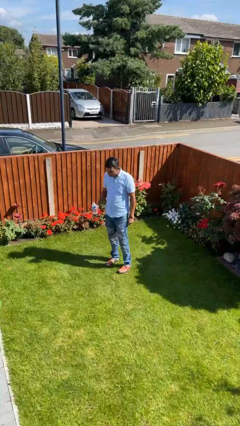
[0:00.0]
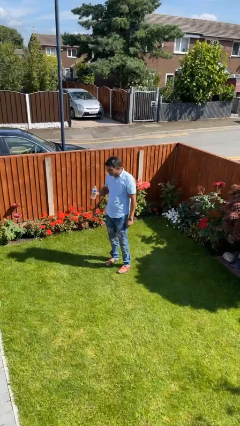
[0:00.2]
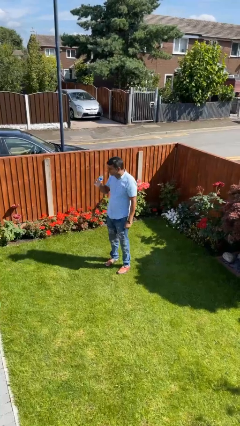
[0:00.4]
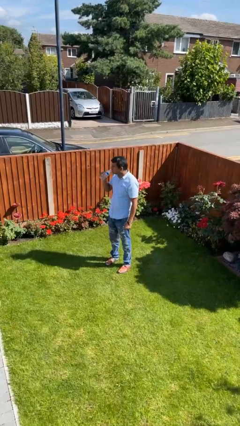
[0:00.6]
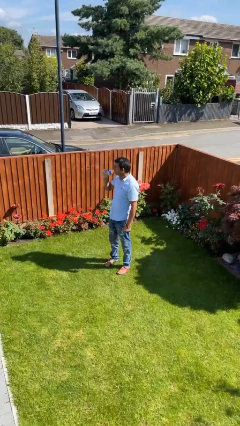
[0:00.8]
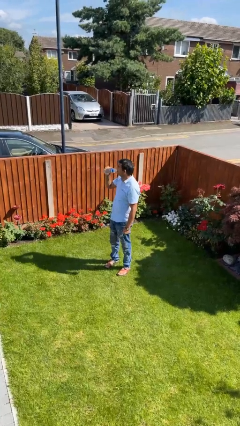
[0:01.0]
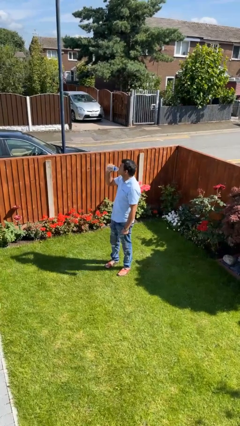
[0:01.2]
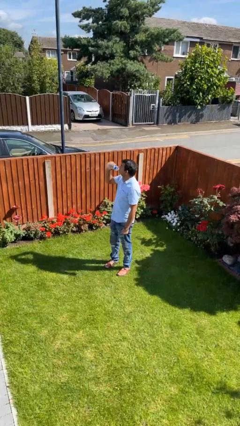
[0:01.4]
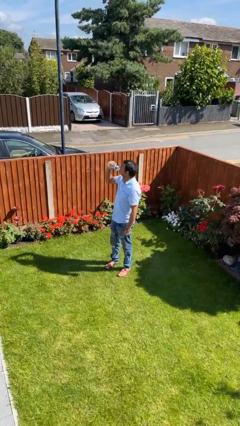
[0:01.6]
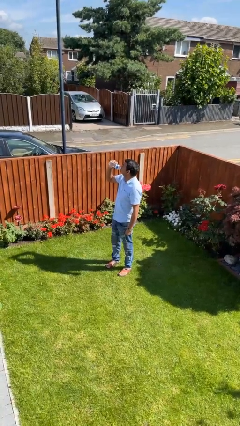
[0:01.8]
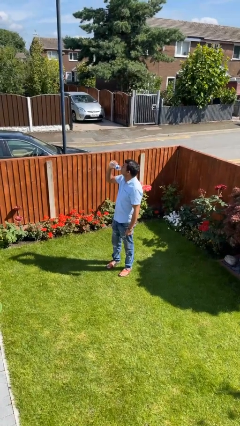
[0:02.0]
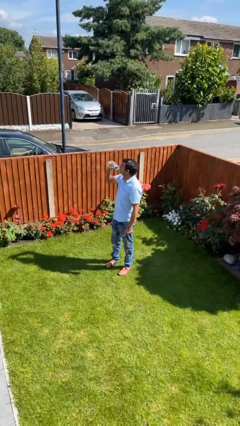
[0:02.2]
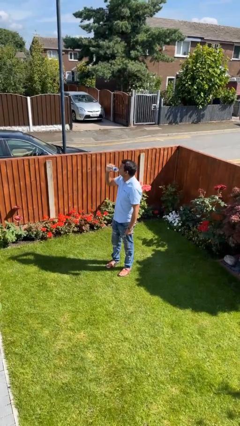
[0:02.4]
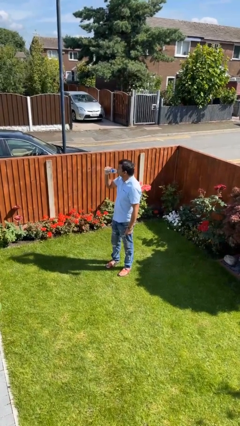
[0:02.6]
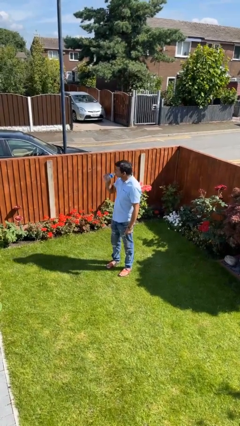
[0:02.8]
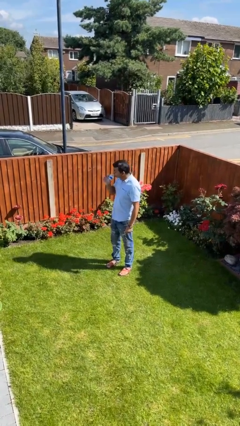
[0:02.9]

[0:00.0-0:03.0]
person drinks from bottle

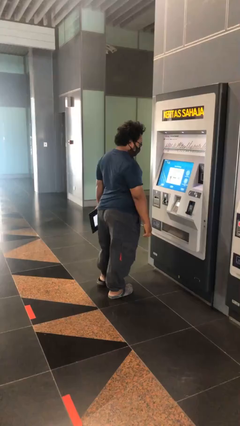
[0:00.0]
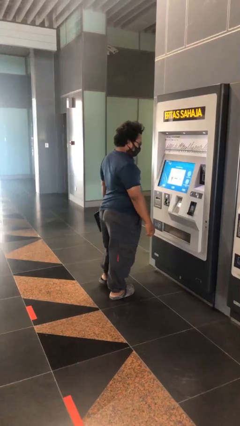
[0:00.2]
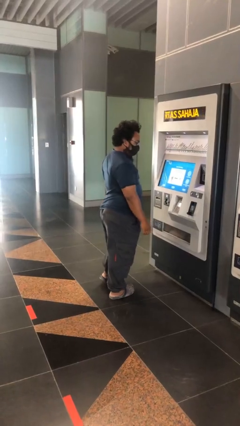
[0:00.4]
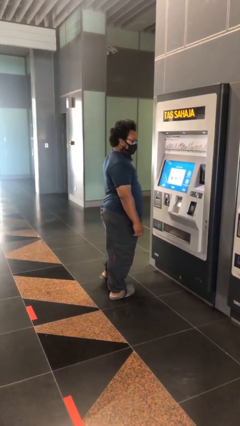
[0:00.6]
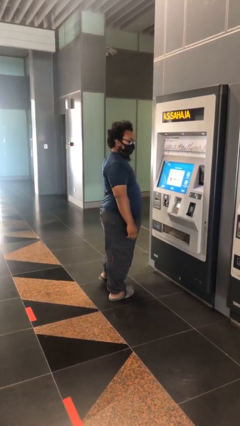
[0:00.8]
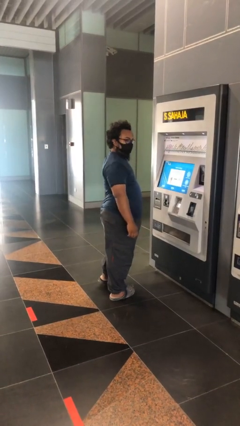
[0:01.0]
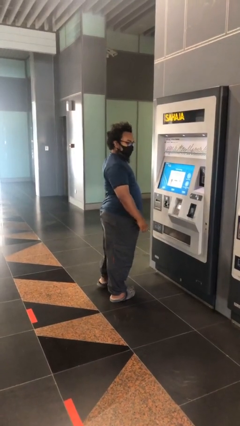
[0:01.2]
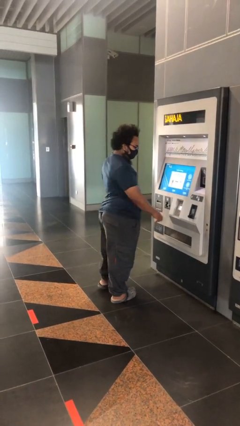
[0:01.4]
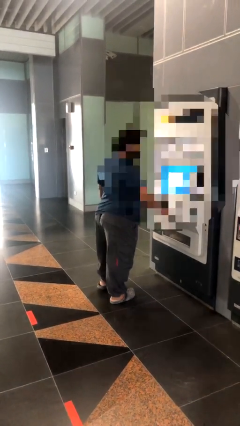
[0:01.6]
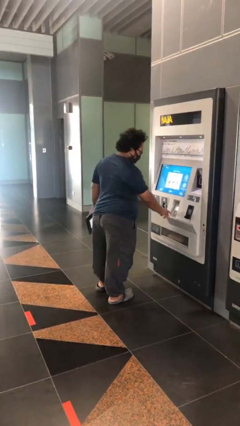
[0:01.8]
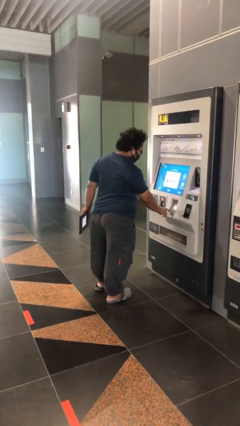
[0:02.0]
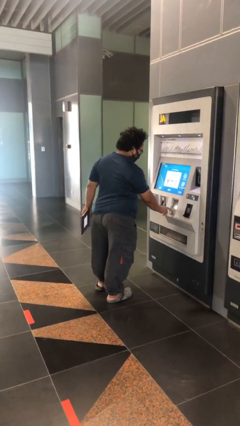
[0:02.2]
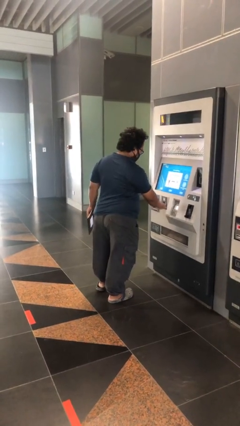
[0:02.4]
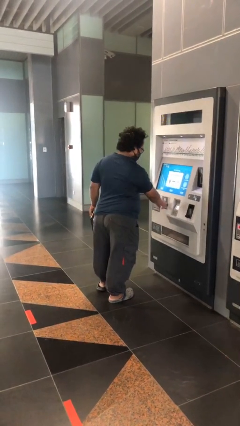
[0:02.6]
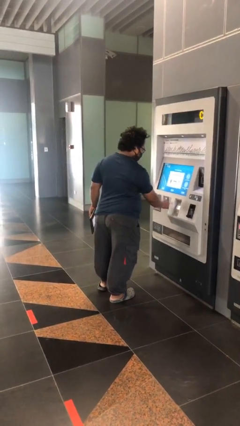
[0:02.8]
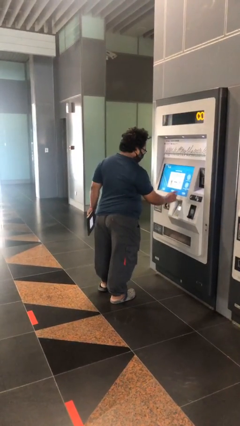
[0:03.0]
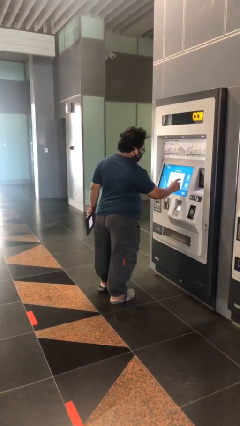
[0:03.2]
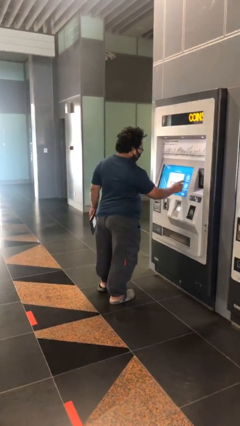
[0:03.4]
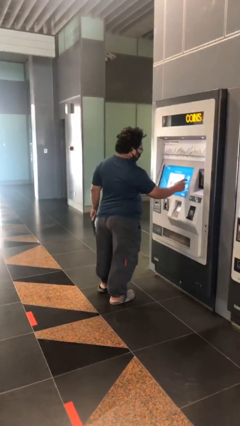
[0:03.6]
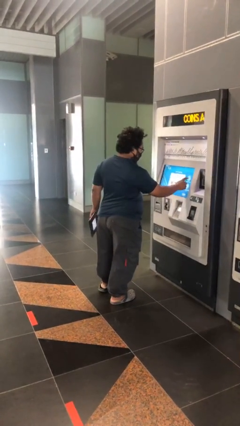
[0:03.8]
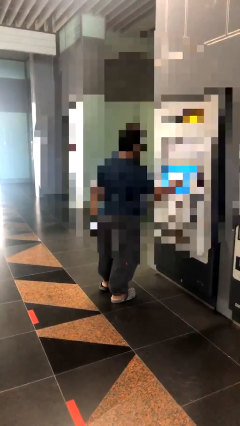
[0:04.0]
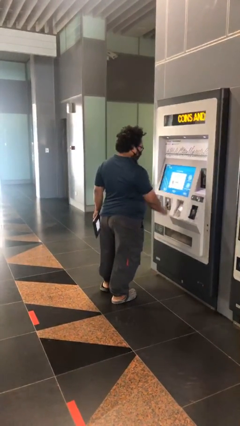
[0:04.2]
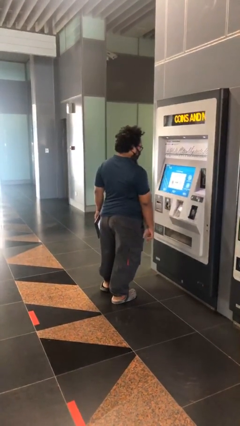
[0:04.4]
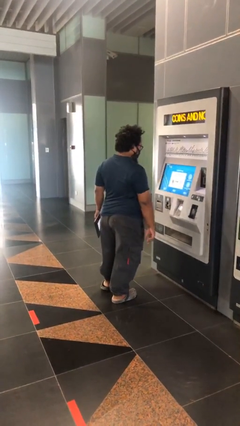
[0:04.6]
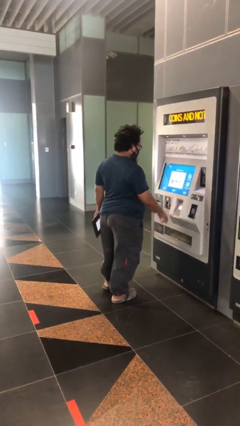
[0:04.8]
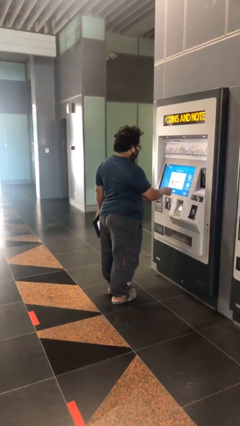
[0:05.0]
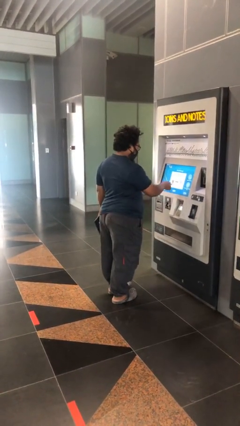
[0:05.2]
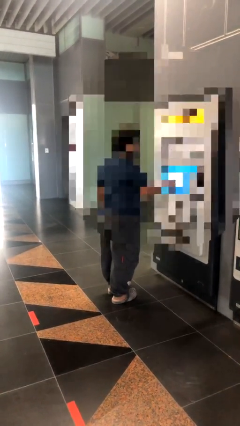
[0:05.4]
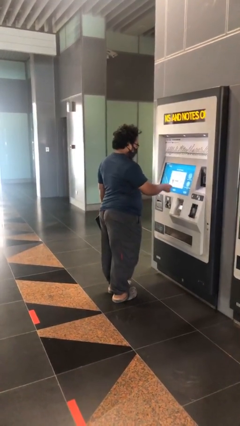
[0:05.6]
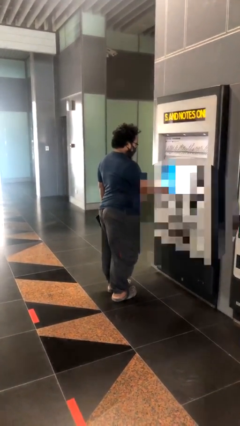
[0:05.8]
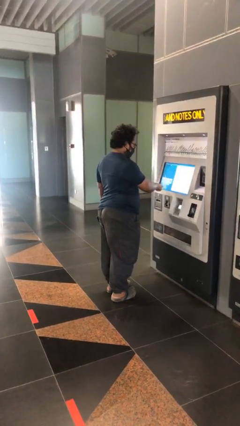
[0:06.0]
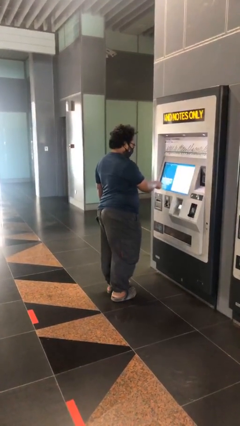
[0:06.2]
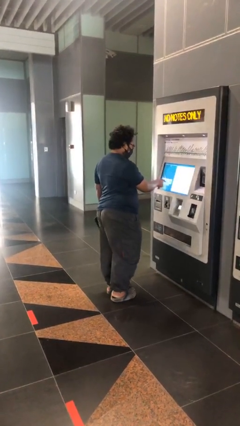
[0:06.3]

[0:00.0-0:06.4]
person purchases from machine

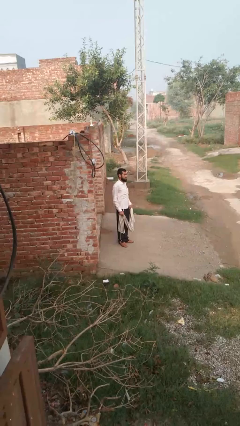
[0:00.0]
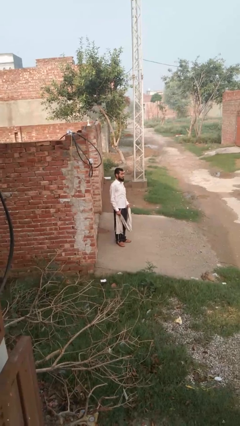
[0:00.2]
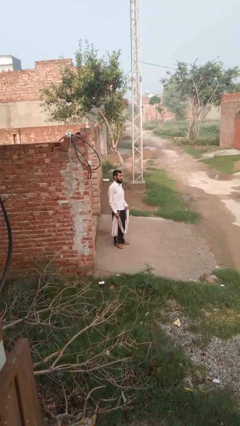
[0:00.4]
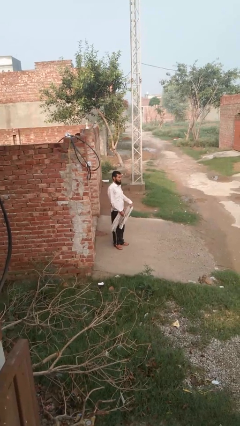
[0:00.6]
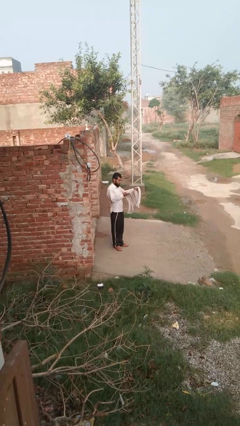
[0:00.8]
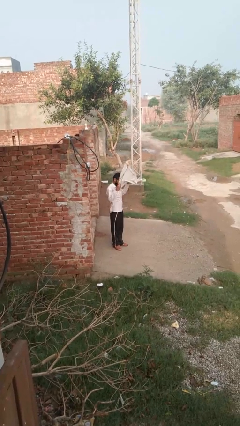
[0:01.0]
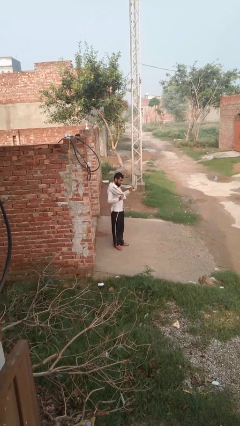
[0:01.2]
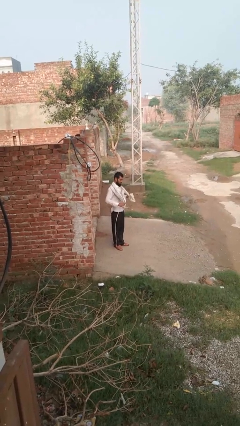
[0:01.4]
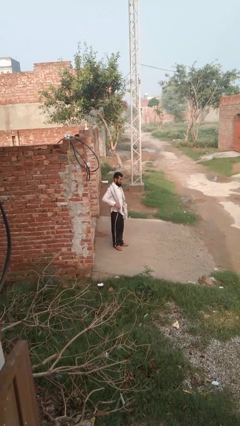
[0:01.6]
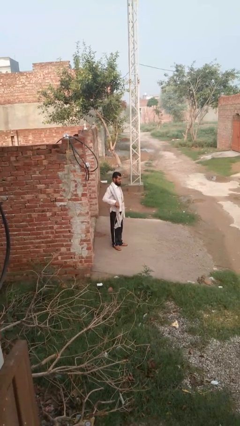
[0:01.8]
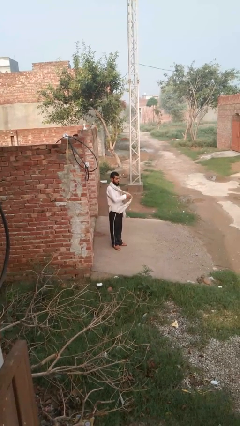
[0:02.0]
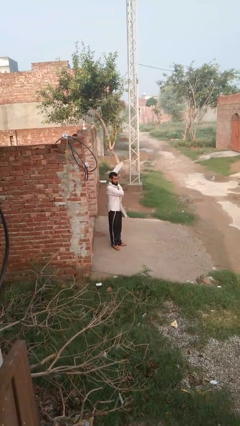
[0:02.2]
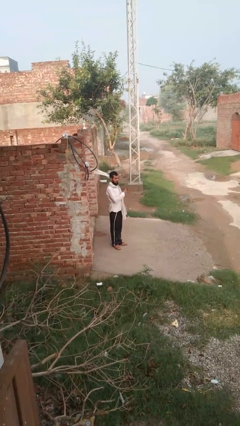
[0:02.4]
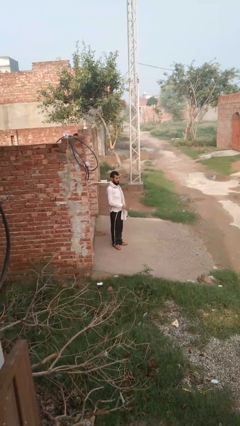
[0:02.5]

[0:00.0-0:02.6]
person puts on scarf

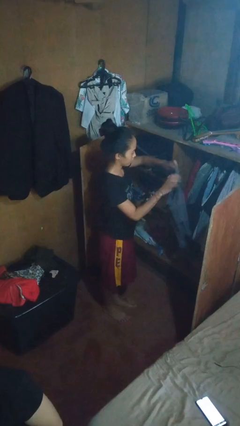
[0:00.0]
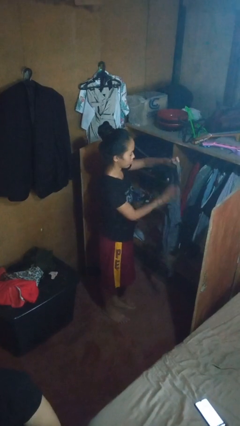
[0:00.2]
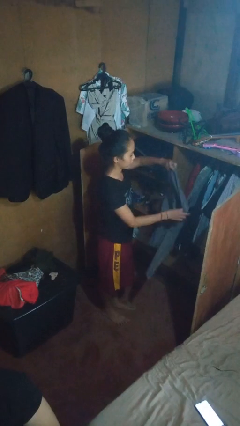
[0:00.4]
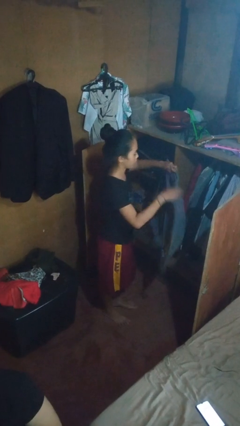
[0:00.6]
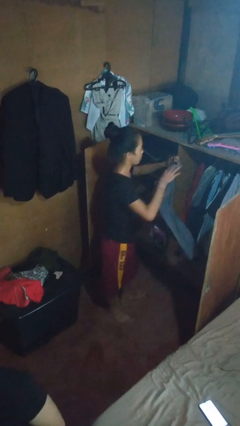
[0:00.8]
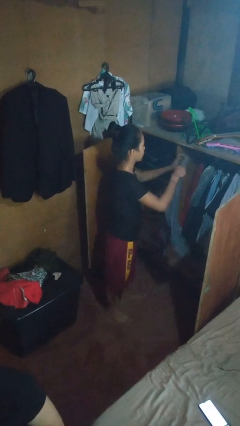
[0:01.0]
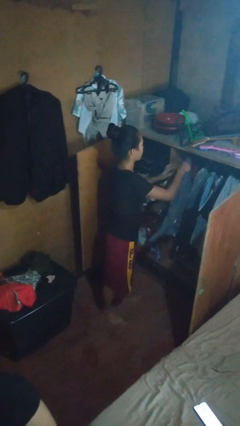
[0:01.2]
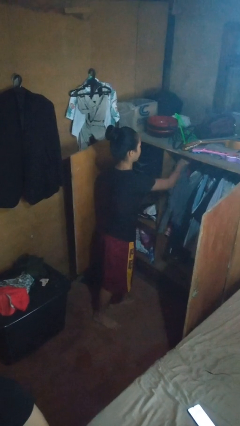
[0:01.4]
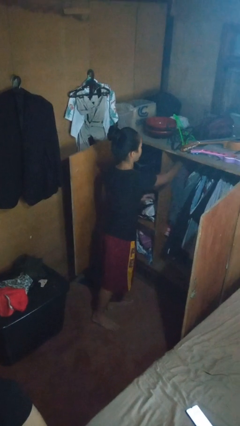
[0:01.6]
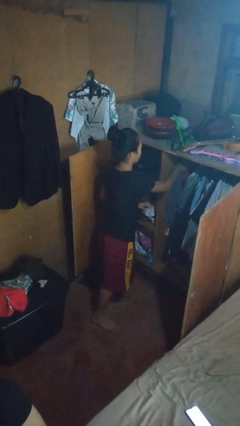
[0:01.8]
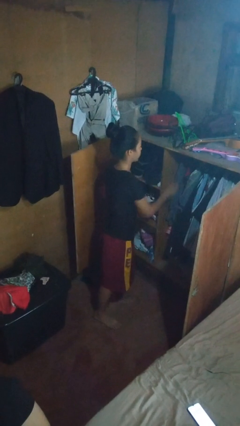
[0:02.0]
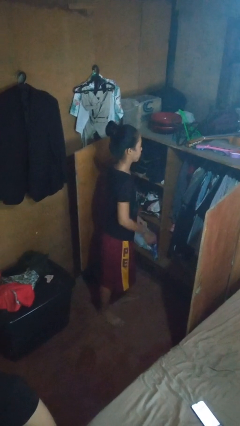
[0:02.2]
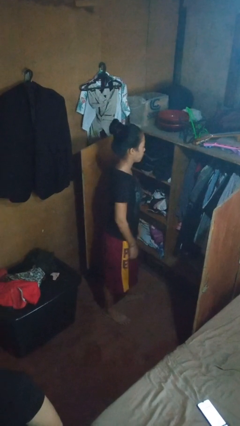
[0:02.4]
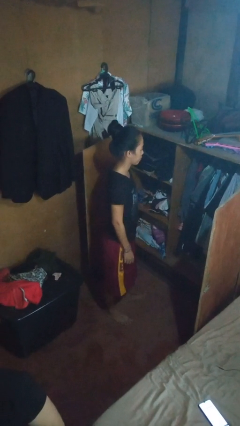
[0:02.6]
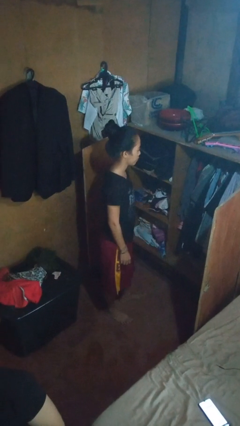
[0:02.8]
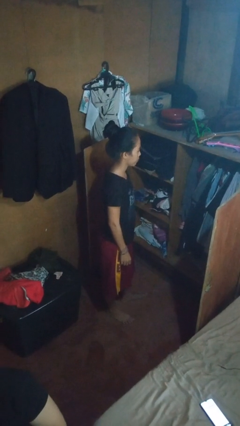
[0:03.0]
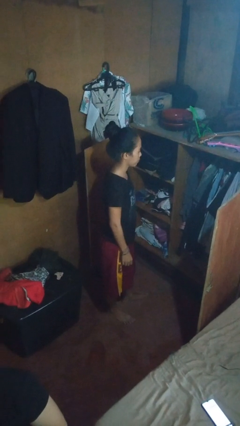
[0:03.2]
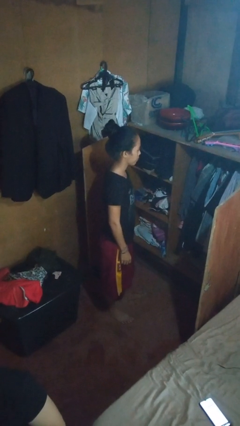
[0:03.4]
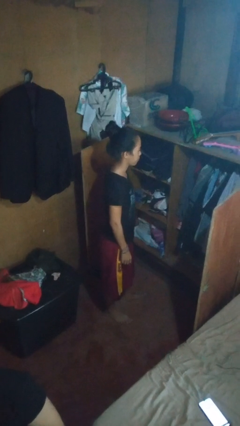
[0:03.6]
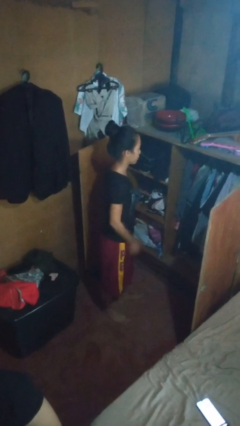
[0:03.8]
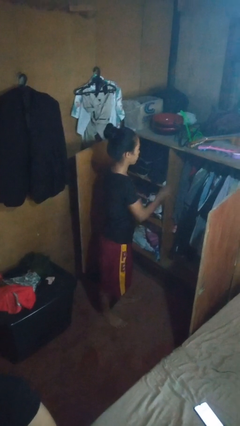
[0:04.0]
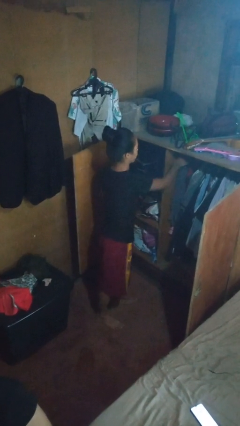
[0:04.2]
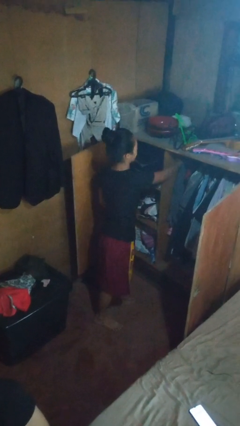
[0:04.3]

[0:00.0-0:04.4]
person puts clothes into closet

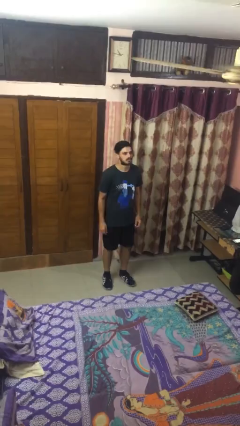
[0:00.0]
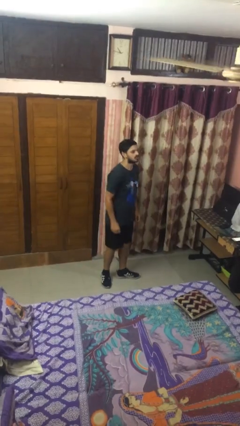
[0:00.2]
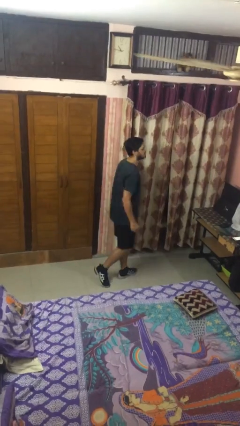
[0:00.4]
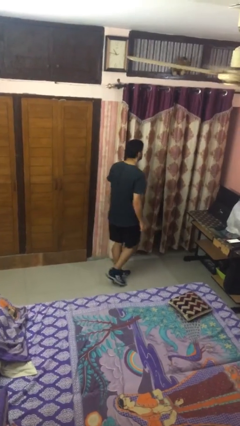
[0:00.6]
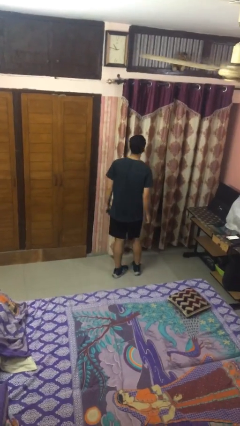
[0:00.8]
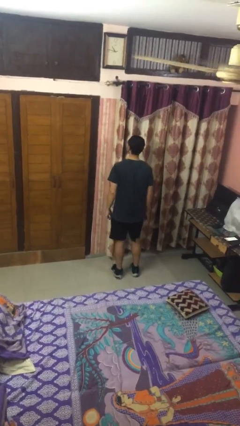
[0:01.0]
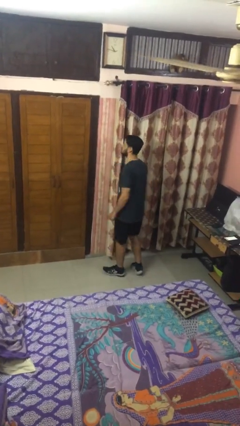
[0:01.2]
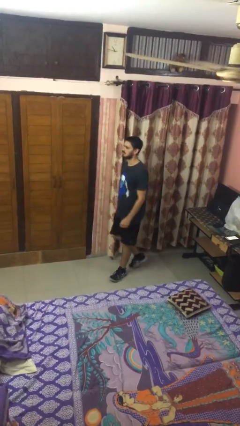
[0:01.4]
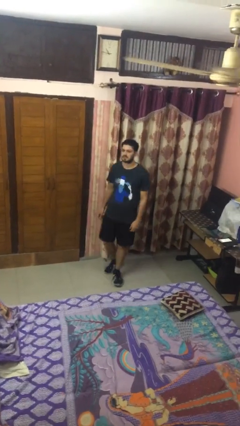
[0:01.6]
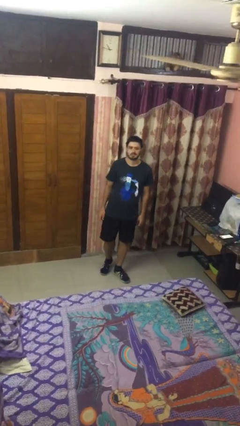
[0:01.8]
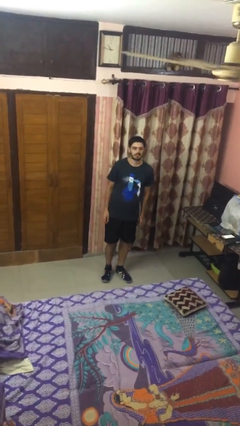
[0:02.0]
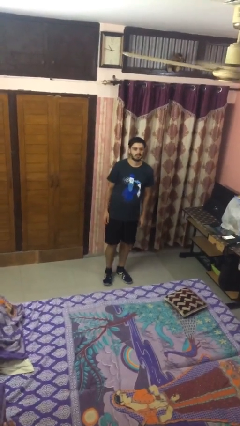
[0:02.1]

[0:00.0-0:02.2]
person twirls
